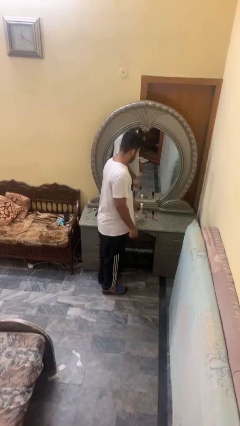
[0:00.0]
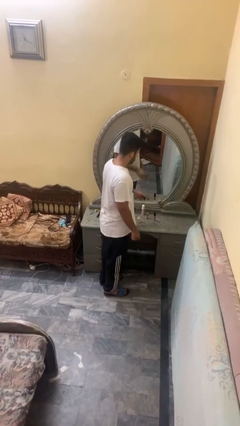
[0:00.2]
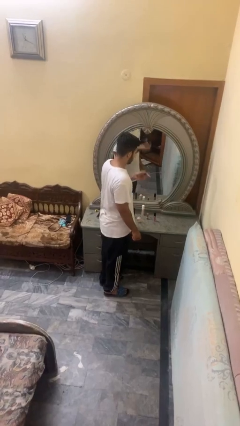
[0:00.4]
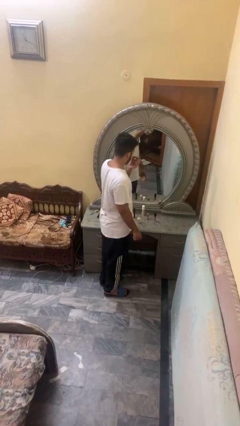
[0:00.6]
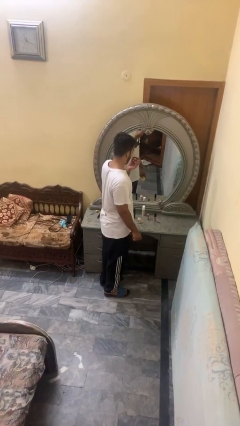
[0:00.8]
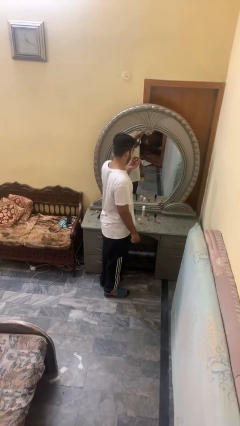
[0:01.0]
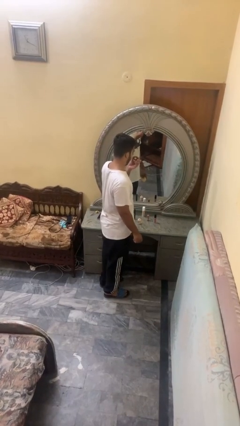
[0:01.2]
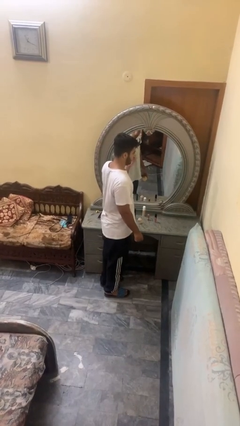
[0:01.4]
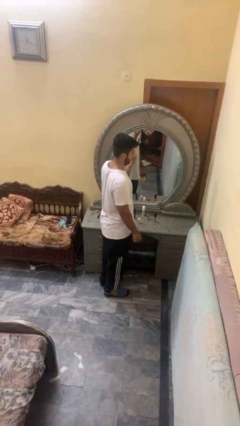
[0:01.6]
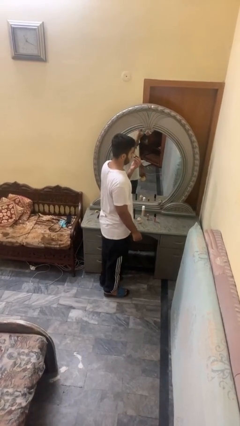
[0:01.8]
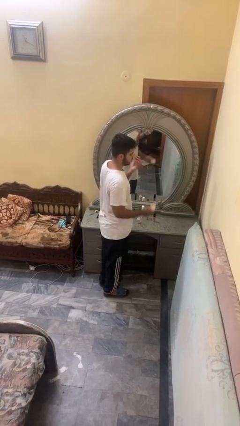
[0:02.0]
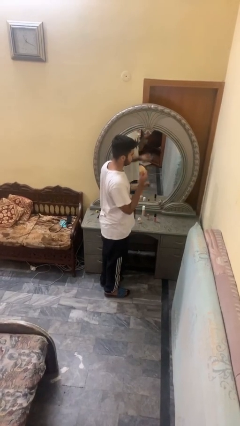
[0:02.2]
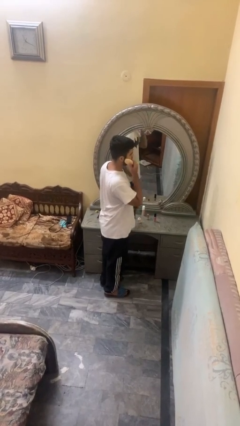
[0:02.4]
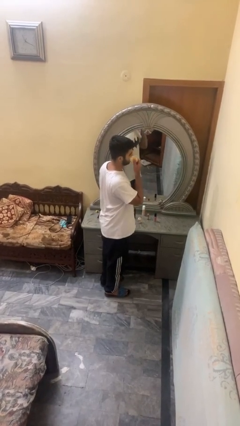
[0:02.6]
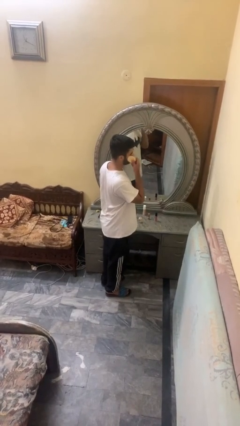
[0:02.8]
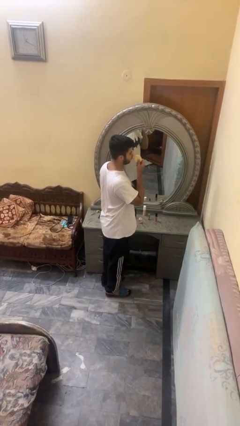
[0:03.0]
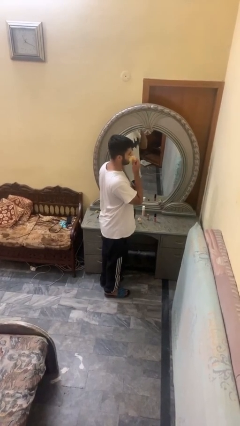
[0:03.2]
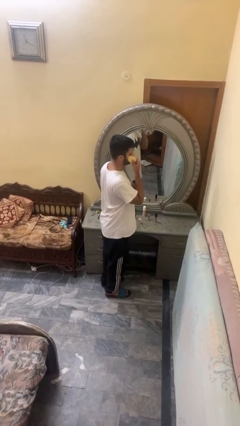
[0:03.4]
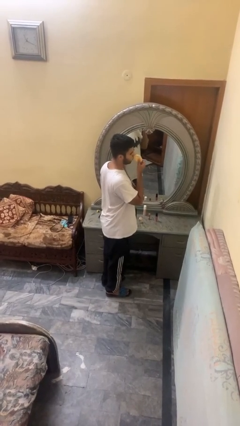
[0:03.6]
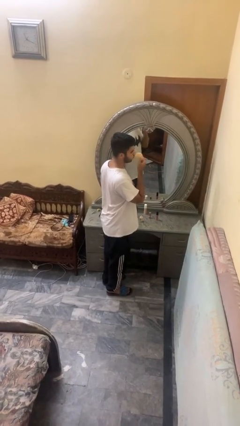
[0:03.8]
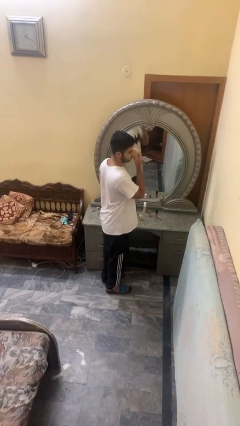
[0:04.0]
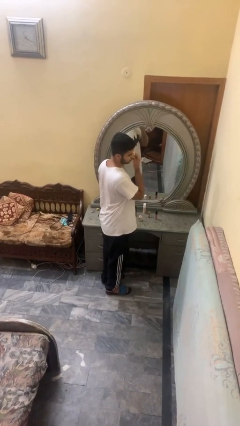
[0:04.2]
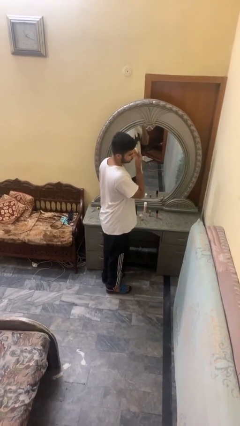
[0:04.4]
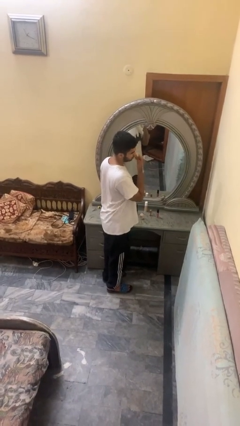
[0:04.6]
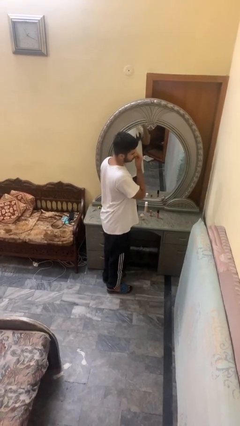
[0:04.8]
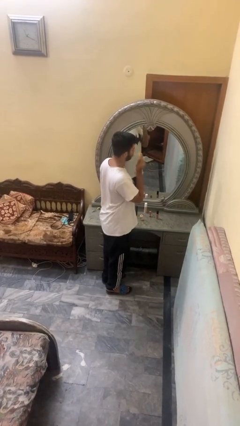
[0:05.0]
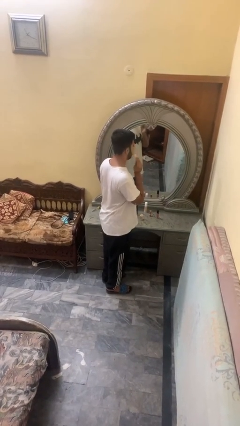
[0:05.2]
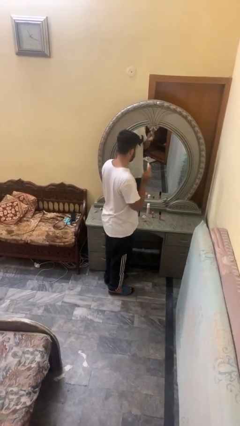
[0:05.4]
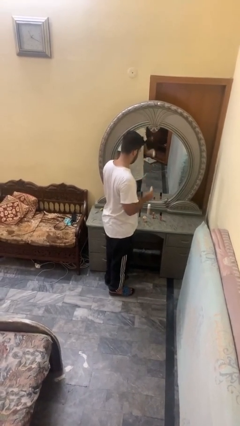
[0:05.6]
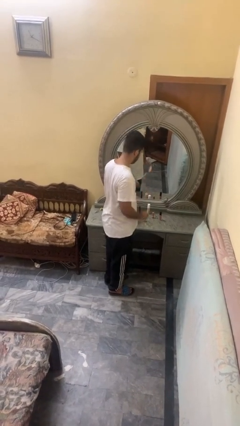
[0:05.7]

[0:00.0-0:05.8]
person applies foundation makeup

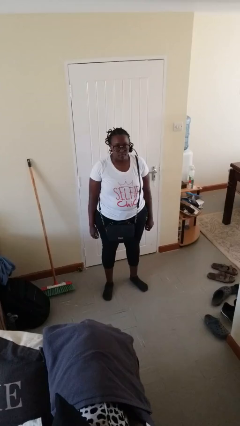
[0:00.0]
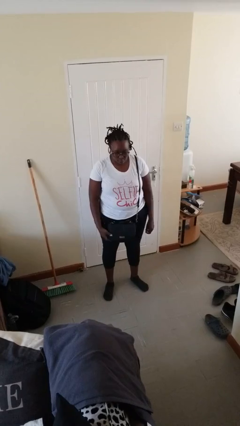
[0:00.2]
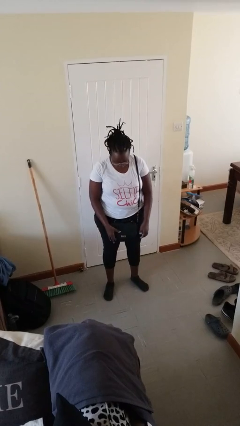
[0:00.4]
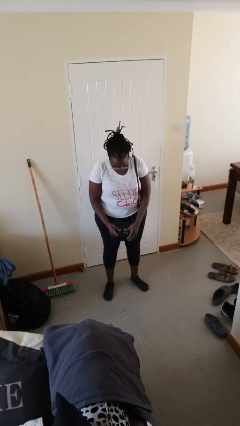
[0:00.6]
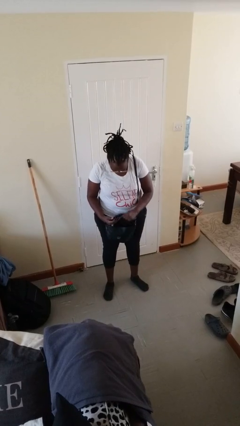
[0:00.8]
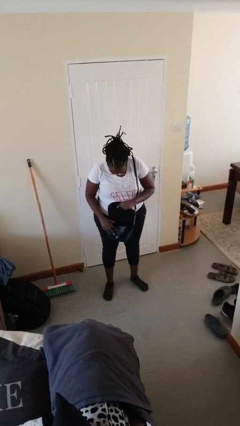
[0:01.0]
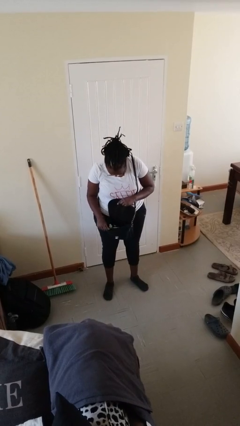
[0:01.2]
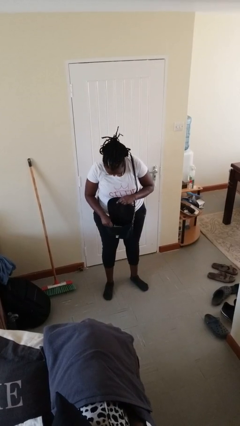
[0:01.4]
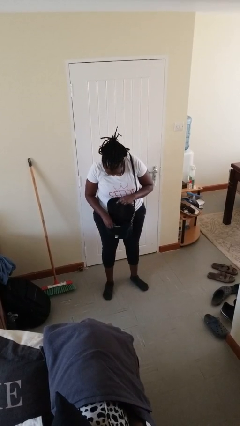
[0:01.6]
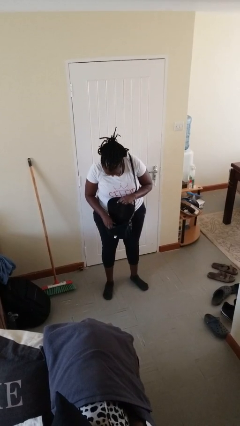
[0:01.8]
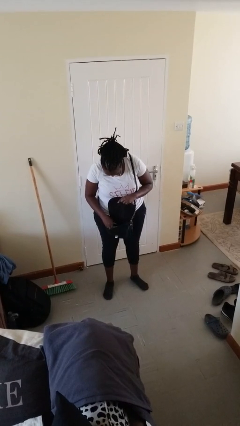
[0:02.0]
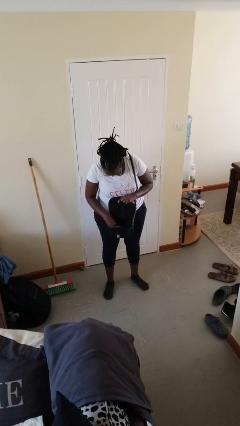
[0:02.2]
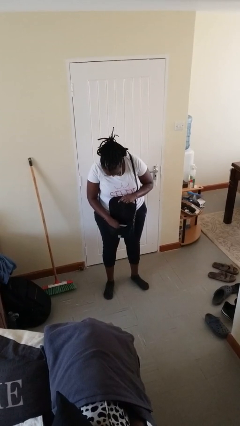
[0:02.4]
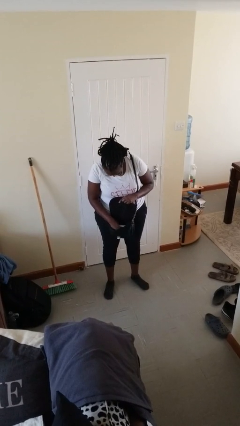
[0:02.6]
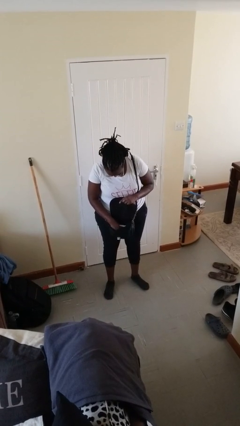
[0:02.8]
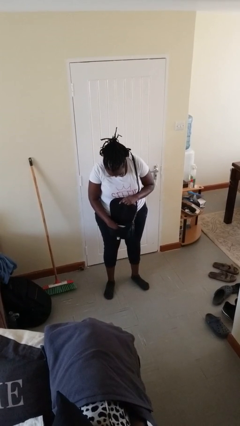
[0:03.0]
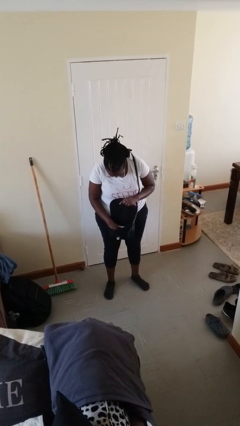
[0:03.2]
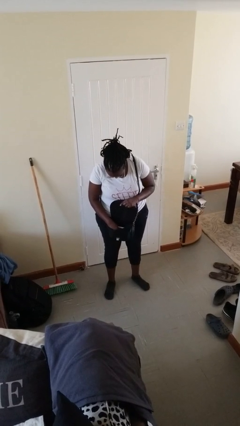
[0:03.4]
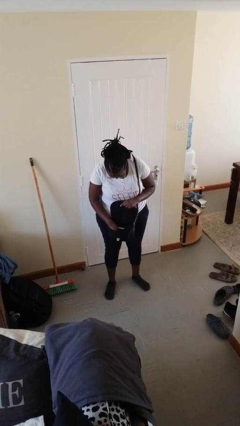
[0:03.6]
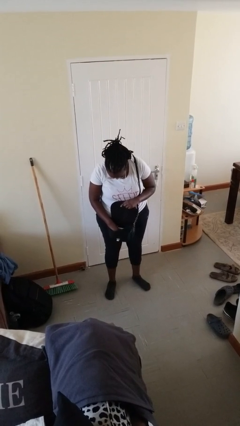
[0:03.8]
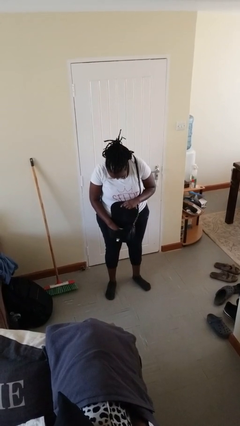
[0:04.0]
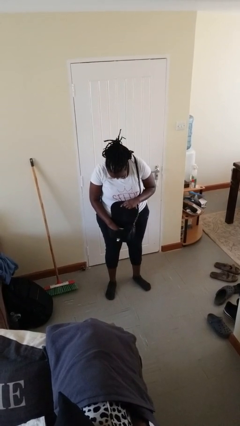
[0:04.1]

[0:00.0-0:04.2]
person searches in purse

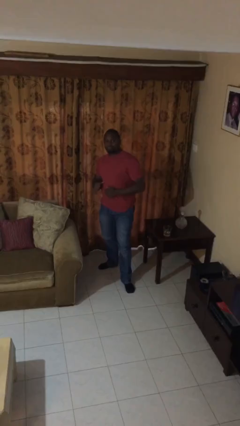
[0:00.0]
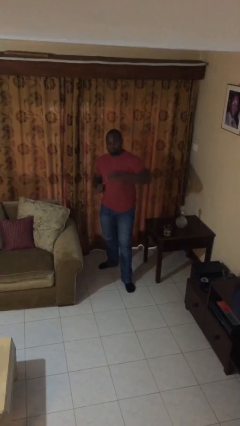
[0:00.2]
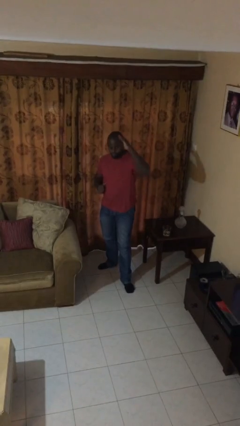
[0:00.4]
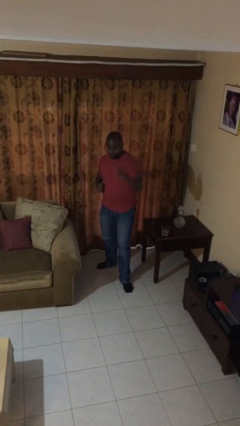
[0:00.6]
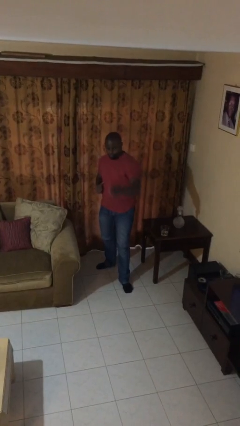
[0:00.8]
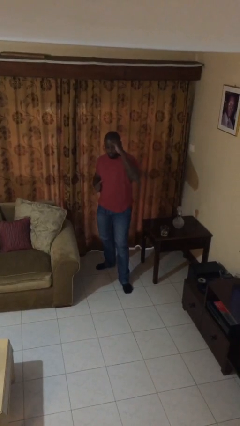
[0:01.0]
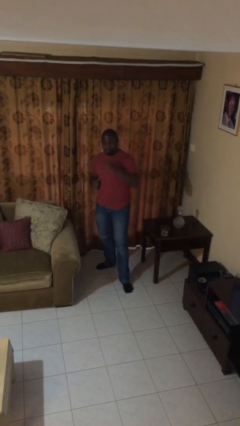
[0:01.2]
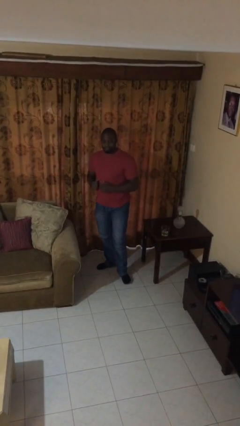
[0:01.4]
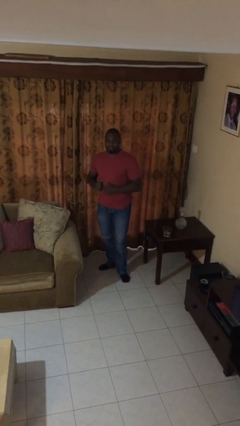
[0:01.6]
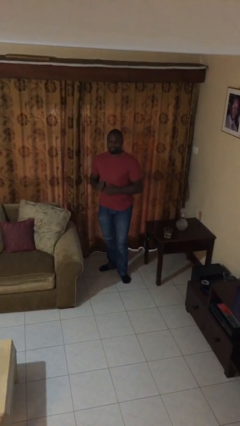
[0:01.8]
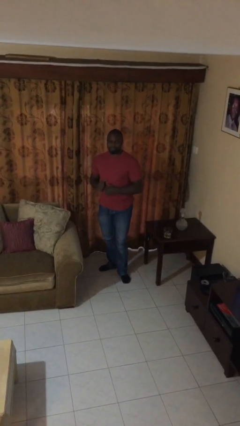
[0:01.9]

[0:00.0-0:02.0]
person karate chop

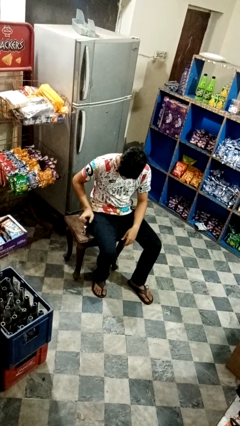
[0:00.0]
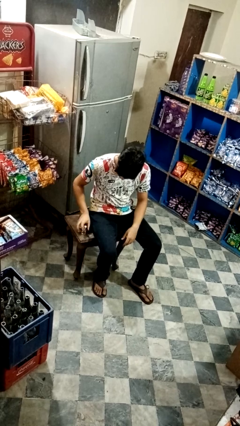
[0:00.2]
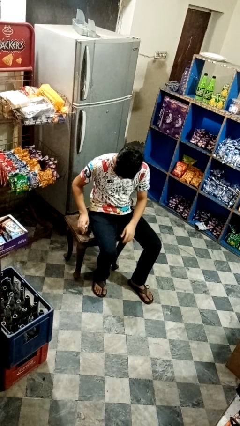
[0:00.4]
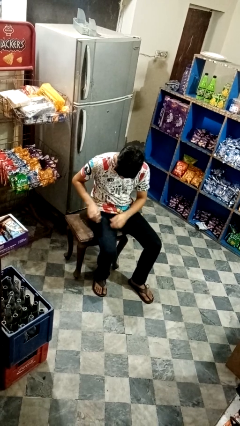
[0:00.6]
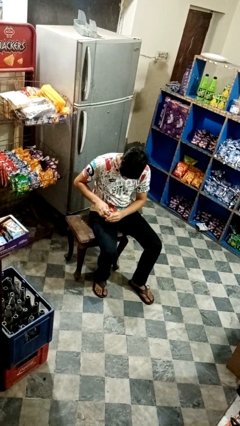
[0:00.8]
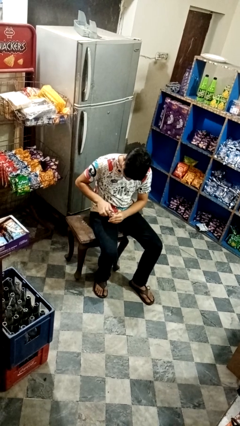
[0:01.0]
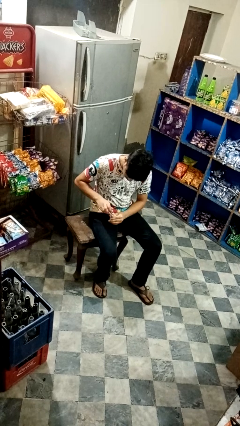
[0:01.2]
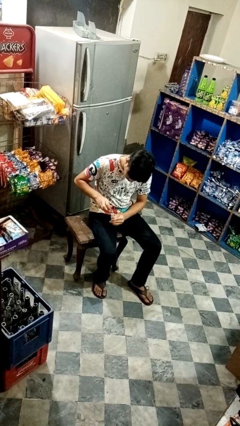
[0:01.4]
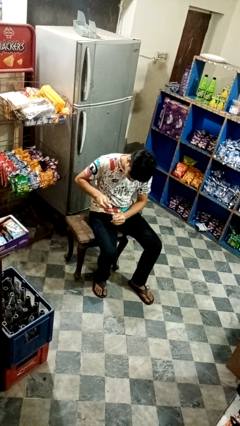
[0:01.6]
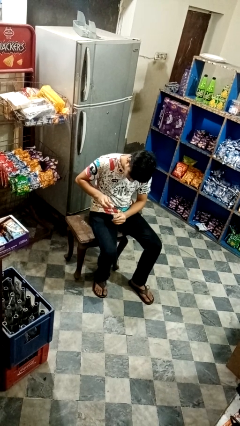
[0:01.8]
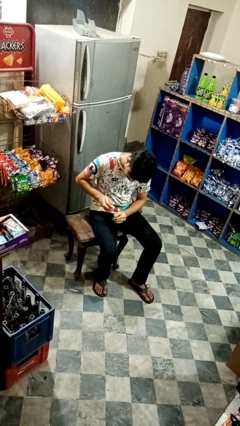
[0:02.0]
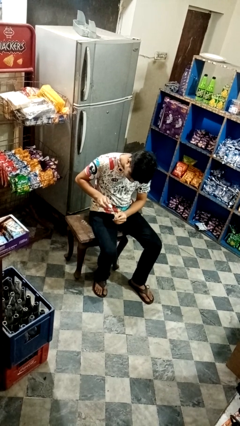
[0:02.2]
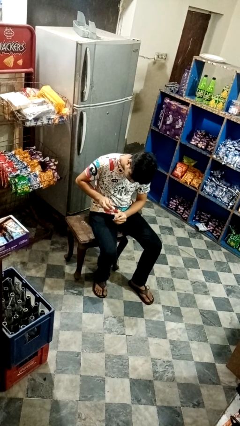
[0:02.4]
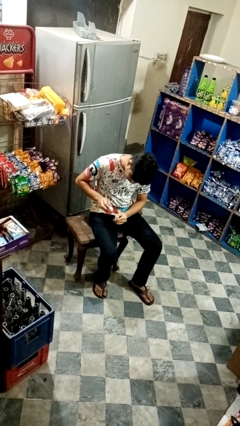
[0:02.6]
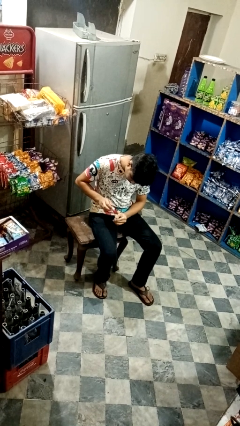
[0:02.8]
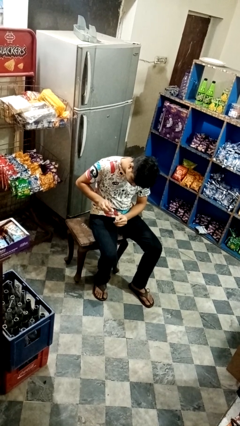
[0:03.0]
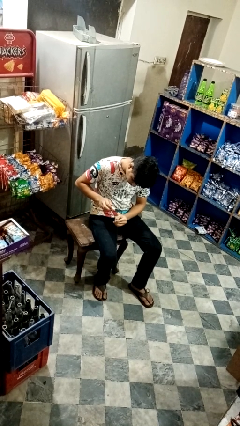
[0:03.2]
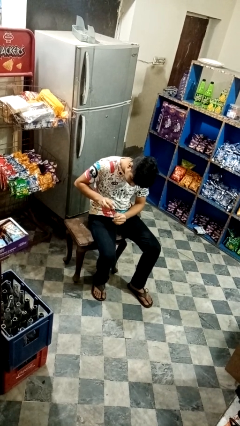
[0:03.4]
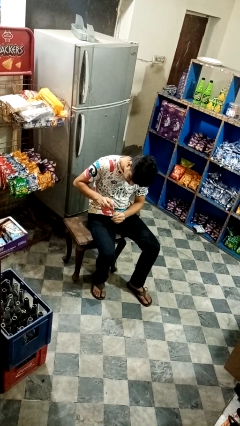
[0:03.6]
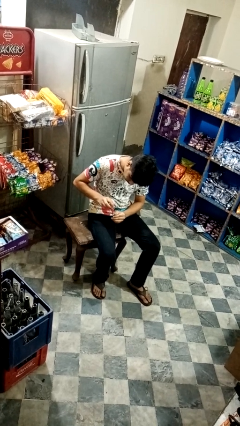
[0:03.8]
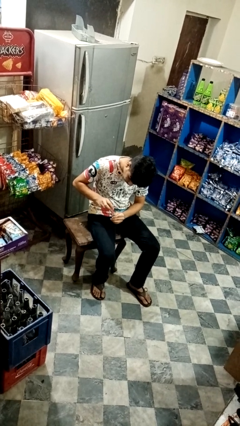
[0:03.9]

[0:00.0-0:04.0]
person paints fingernails

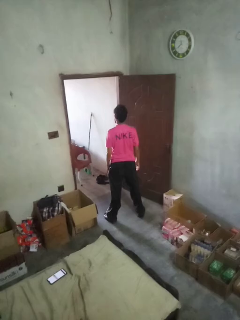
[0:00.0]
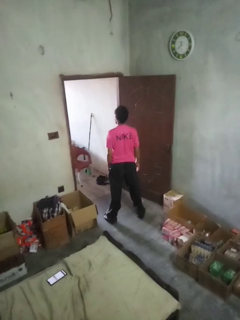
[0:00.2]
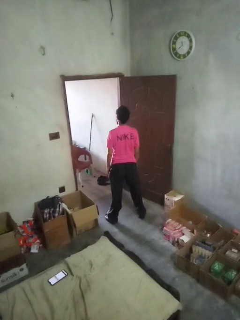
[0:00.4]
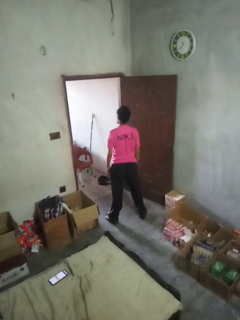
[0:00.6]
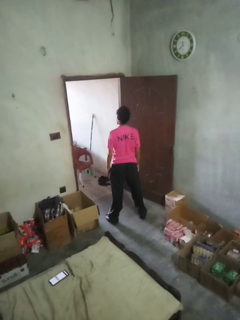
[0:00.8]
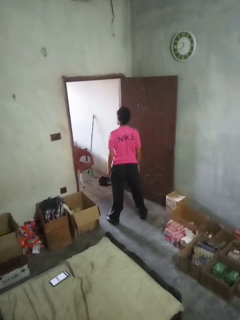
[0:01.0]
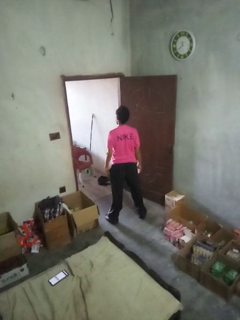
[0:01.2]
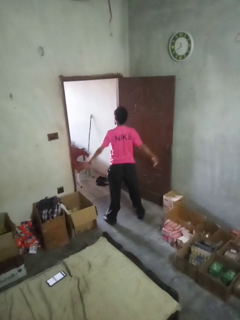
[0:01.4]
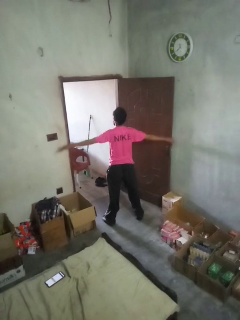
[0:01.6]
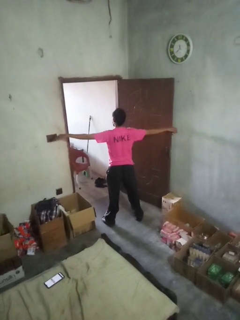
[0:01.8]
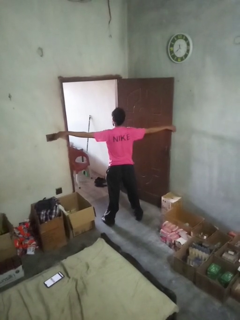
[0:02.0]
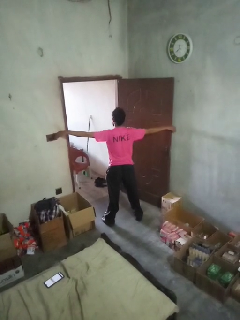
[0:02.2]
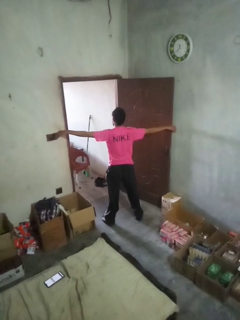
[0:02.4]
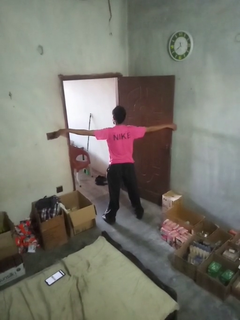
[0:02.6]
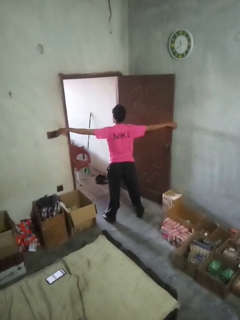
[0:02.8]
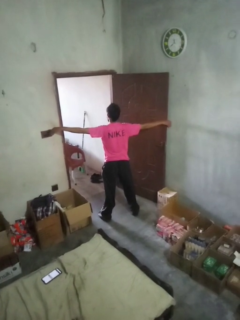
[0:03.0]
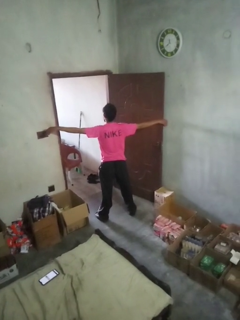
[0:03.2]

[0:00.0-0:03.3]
person stretches arms to side
